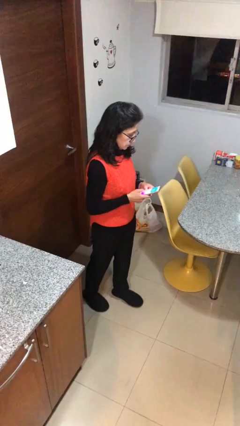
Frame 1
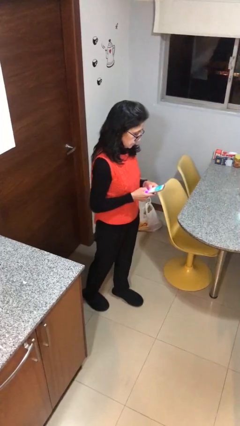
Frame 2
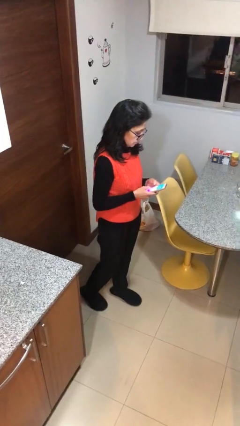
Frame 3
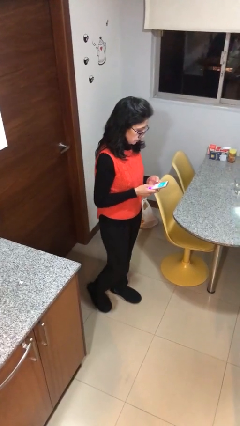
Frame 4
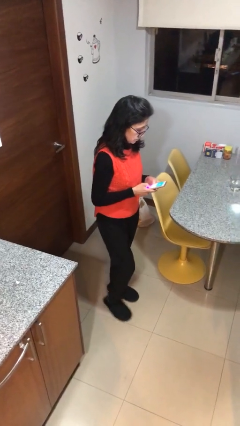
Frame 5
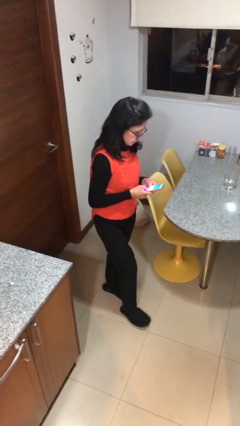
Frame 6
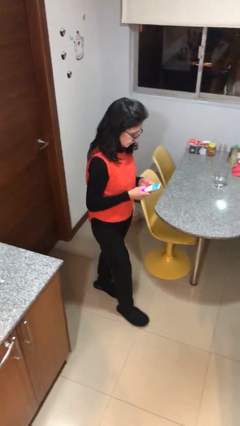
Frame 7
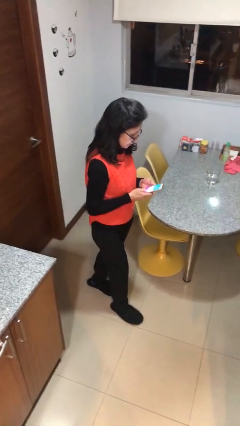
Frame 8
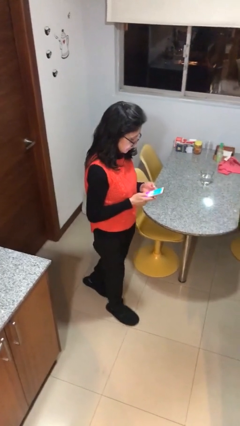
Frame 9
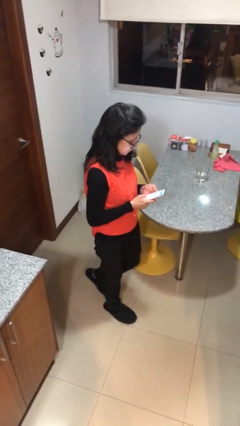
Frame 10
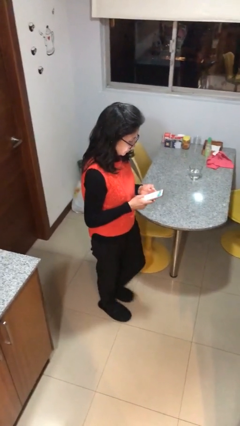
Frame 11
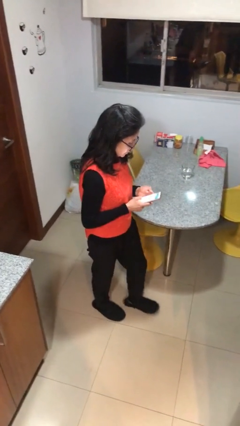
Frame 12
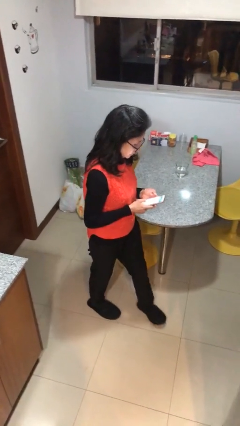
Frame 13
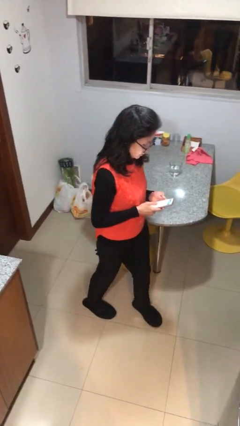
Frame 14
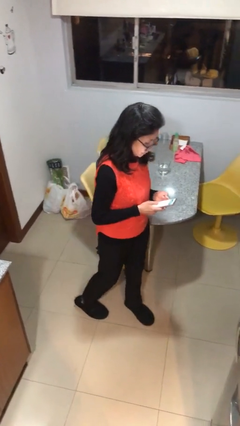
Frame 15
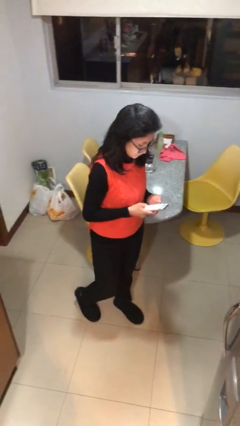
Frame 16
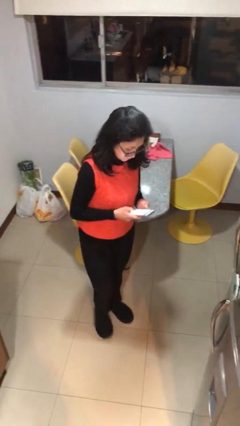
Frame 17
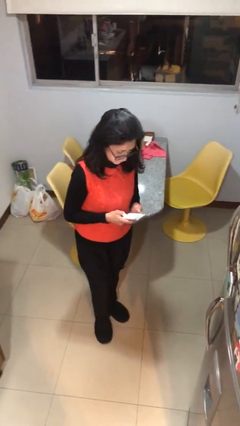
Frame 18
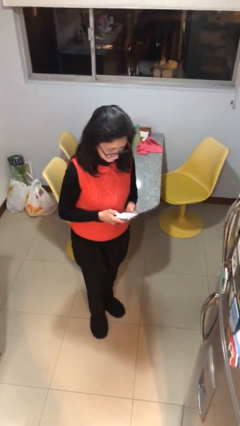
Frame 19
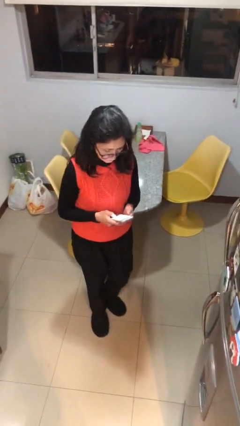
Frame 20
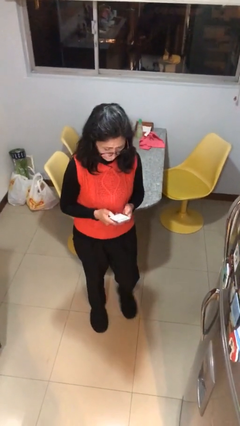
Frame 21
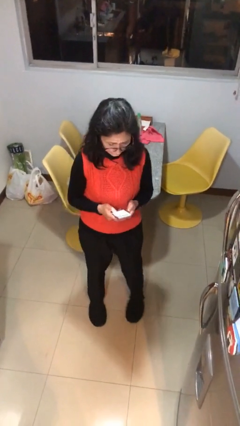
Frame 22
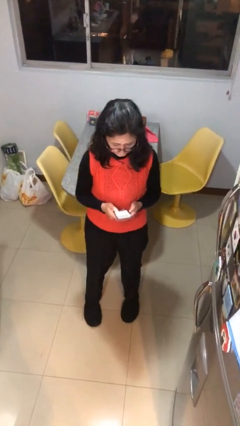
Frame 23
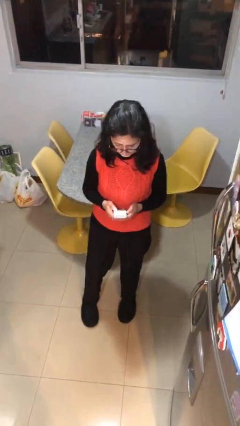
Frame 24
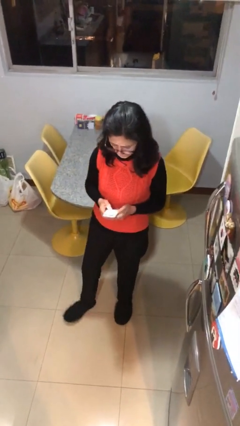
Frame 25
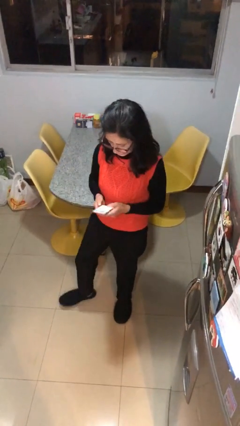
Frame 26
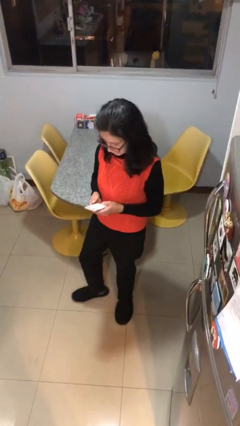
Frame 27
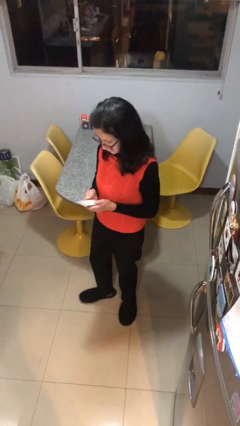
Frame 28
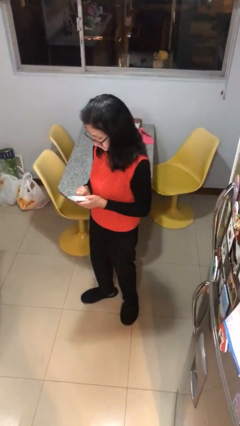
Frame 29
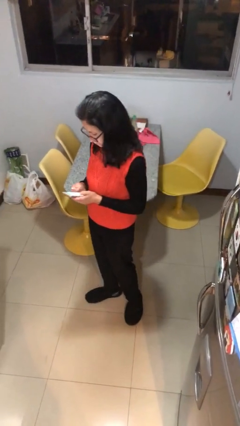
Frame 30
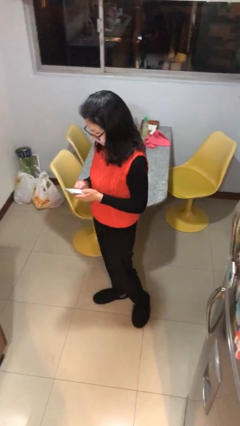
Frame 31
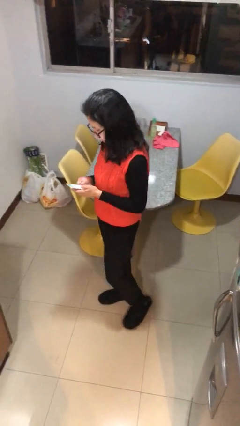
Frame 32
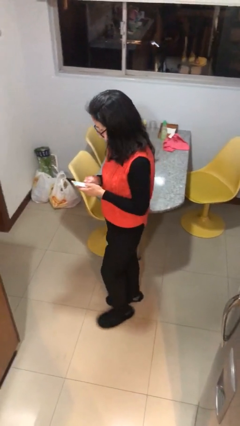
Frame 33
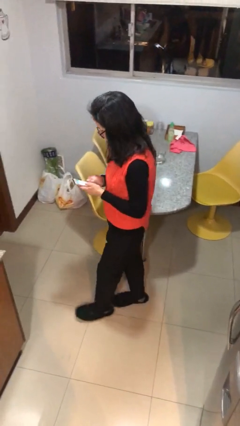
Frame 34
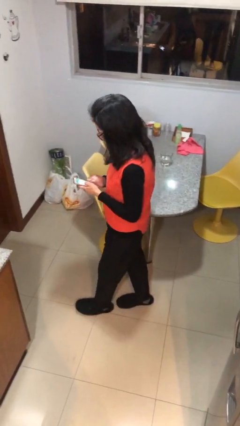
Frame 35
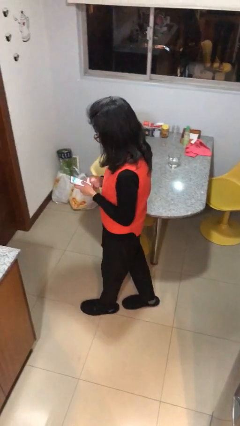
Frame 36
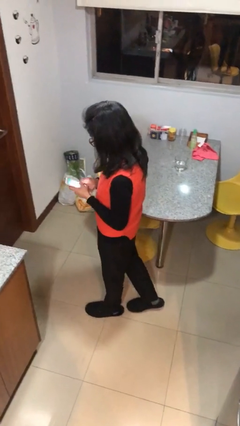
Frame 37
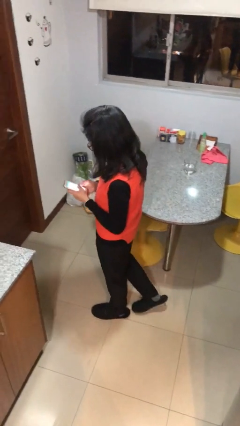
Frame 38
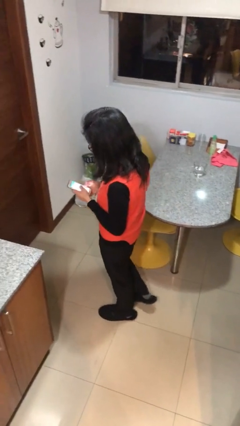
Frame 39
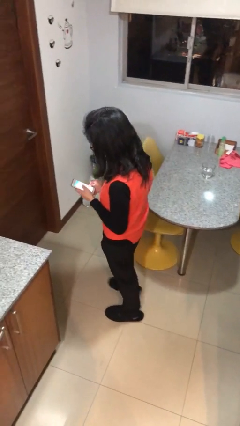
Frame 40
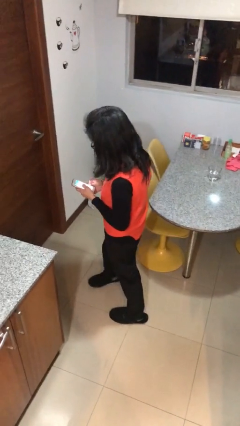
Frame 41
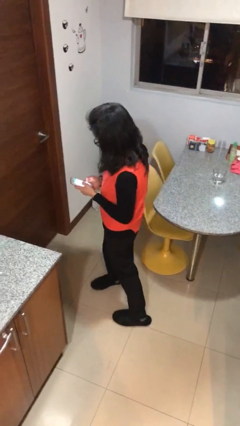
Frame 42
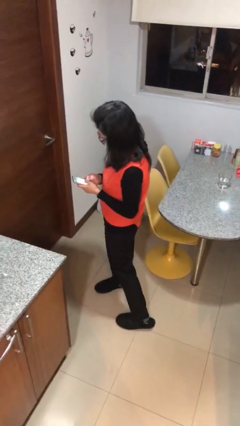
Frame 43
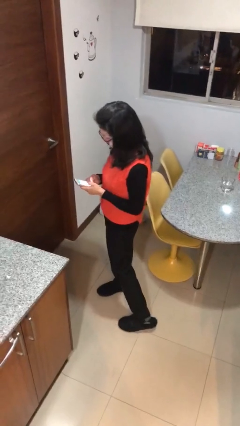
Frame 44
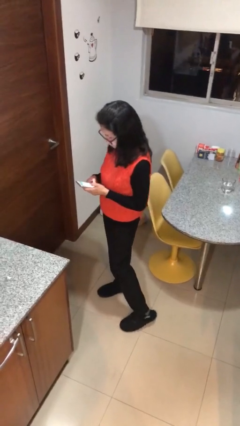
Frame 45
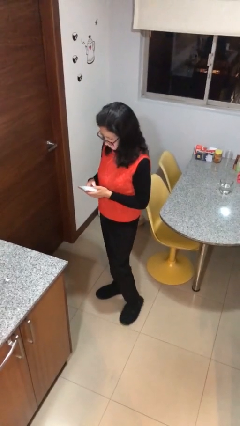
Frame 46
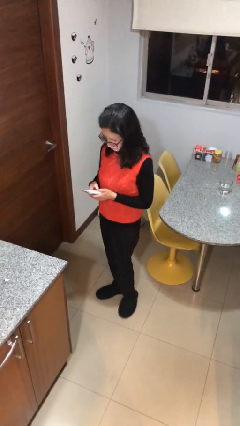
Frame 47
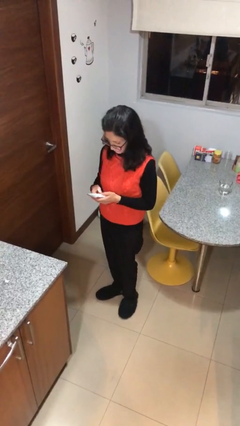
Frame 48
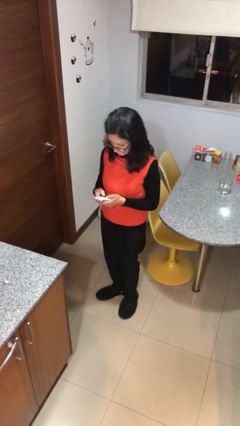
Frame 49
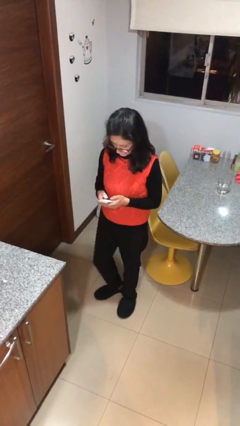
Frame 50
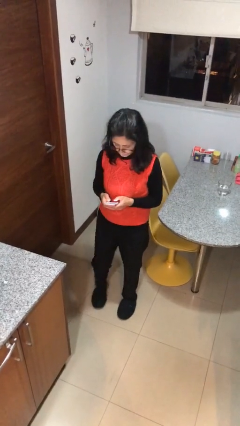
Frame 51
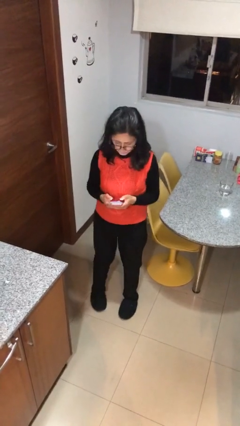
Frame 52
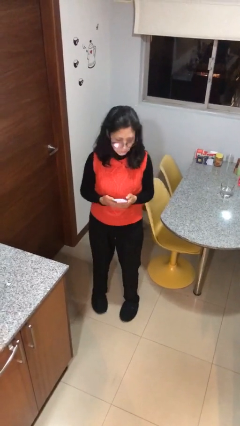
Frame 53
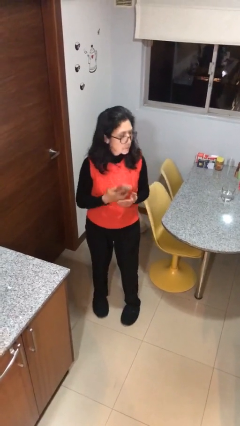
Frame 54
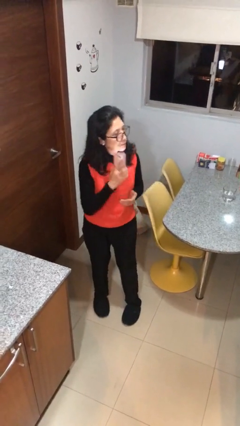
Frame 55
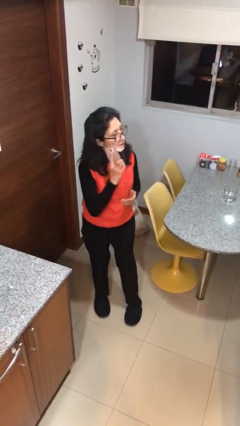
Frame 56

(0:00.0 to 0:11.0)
person texts on phone

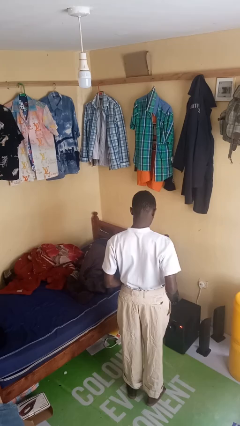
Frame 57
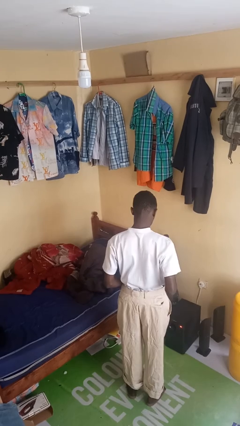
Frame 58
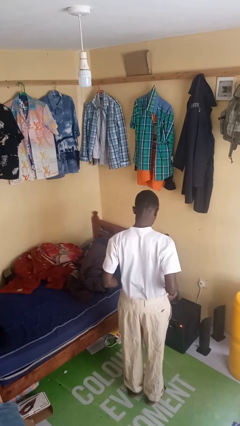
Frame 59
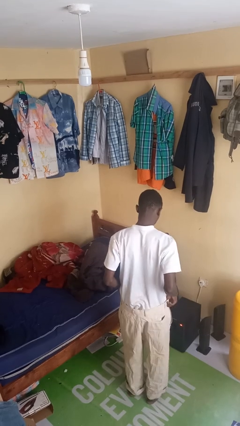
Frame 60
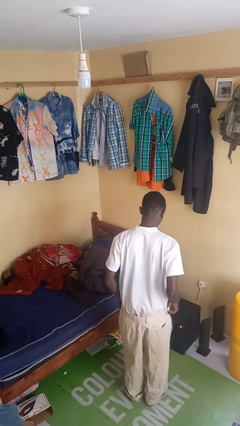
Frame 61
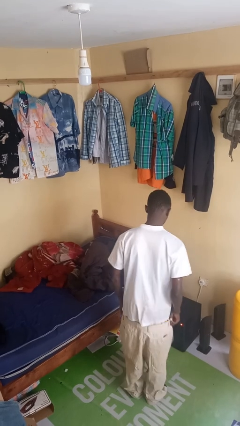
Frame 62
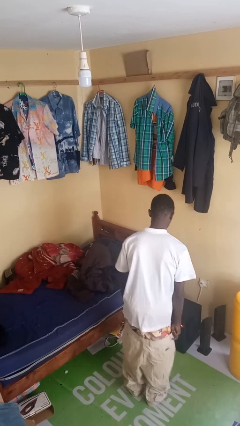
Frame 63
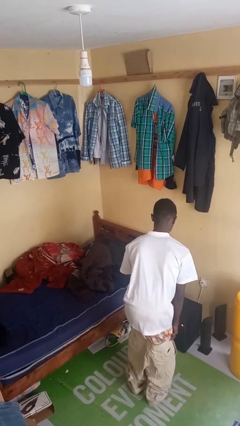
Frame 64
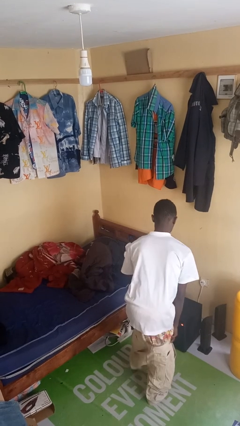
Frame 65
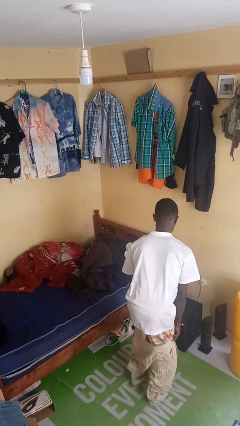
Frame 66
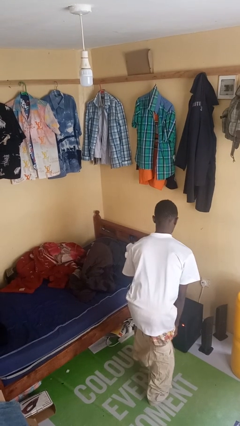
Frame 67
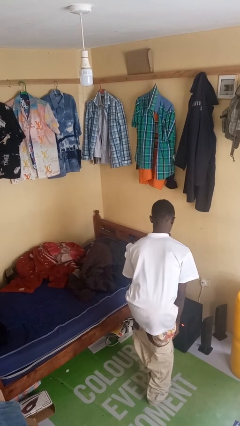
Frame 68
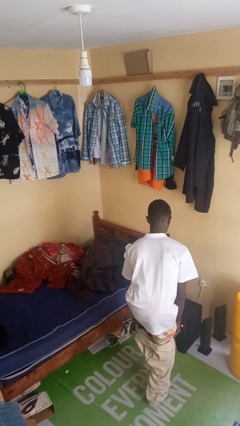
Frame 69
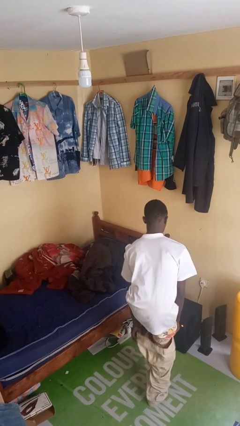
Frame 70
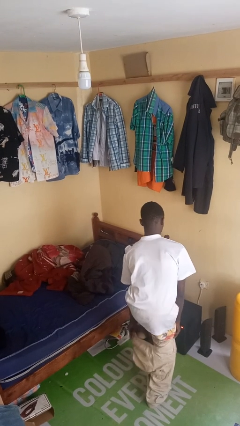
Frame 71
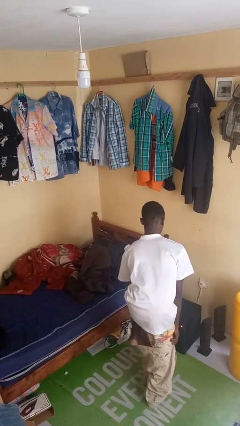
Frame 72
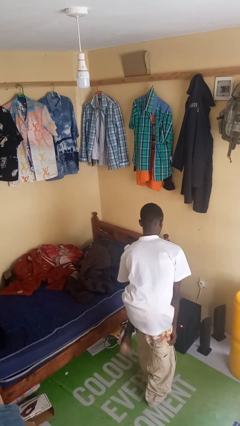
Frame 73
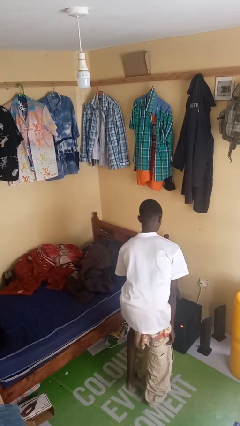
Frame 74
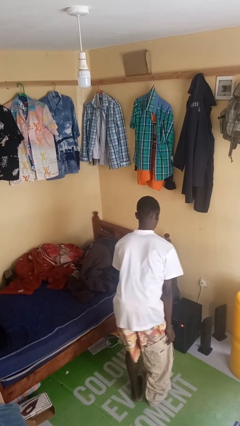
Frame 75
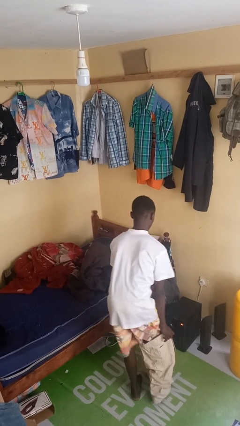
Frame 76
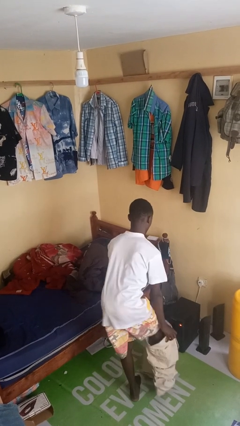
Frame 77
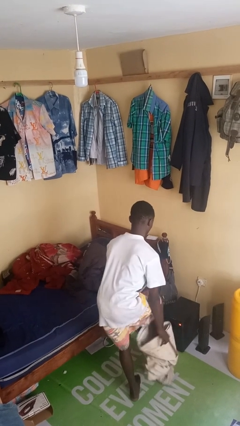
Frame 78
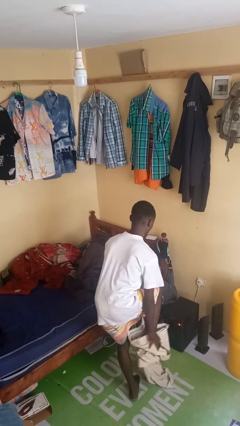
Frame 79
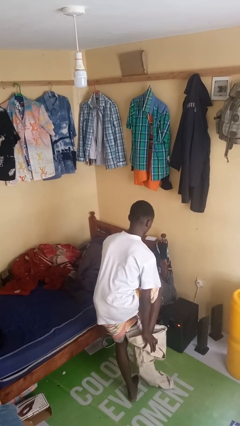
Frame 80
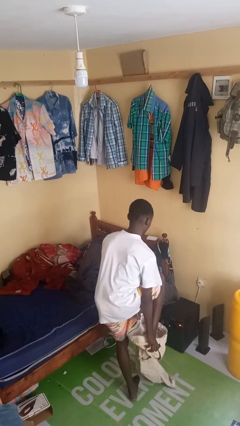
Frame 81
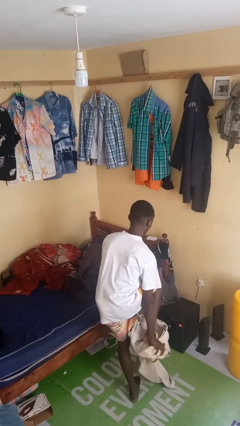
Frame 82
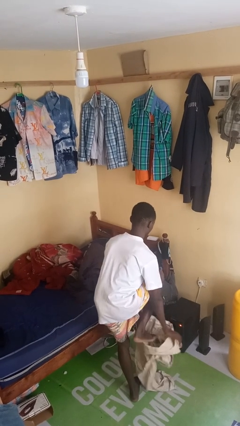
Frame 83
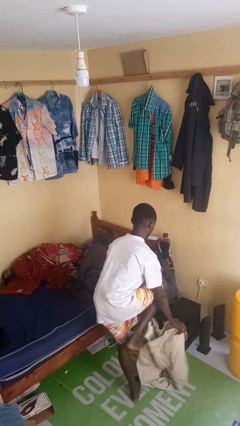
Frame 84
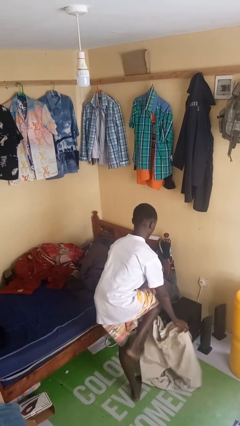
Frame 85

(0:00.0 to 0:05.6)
person takes off pants

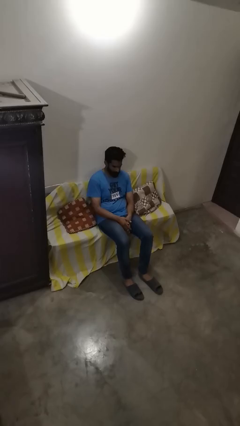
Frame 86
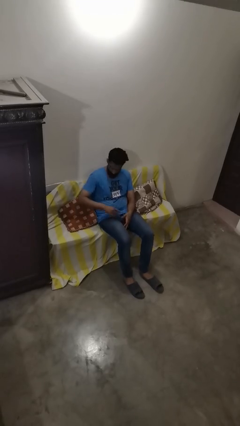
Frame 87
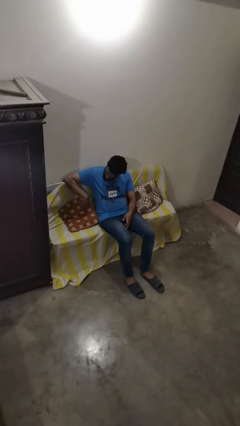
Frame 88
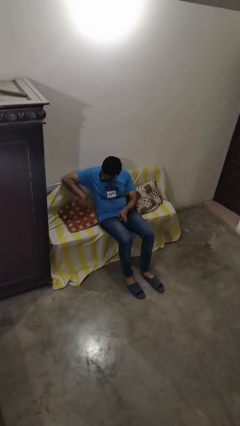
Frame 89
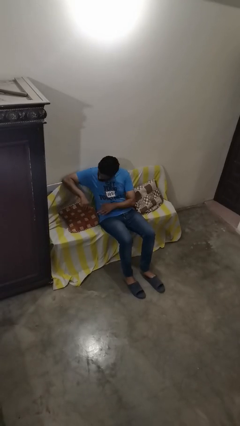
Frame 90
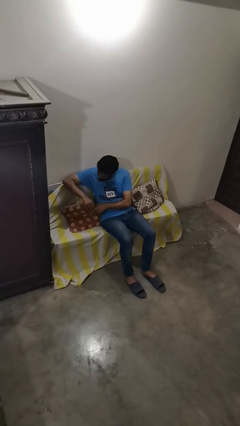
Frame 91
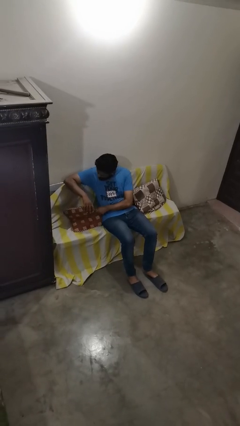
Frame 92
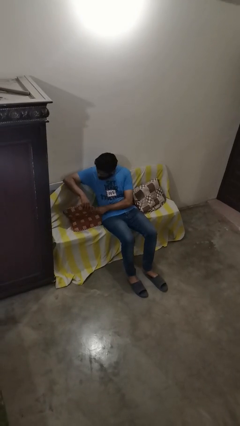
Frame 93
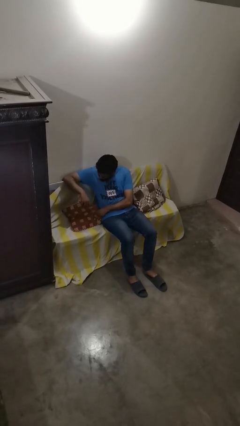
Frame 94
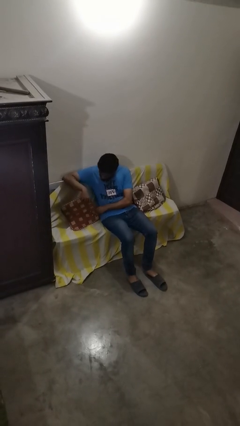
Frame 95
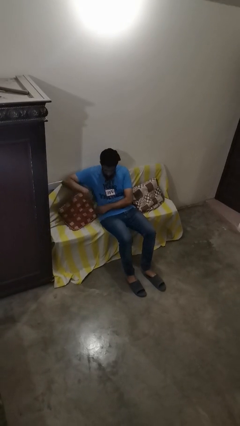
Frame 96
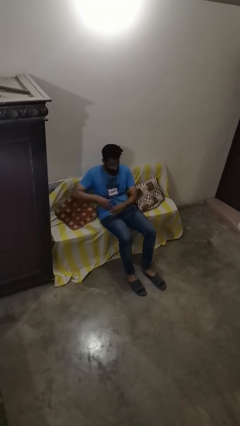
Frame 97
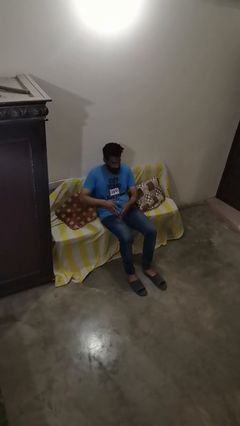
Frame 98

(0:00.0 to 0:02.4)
person searches in couch
